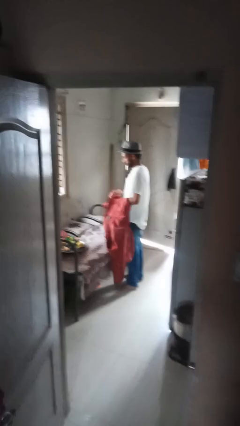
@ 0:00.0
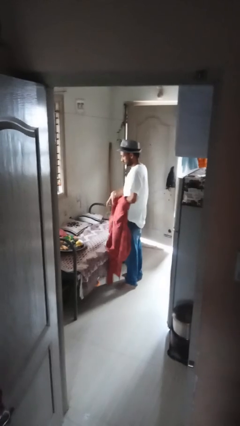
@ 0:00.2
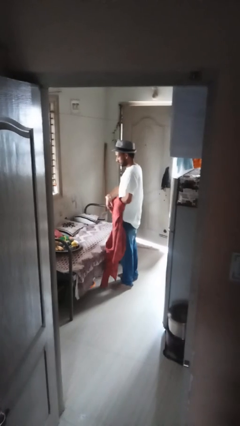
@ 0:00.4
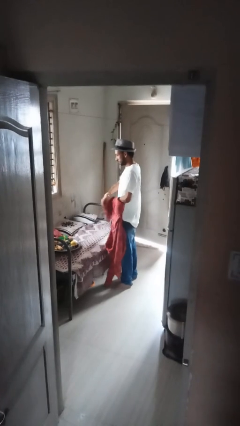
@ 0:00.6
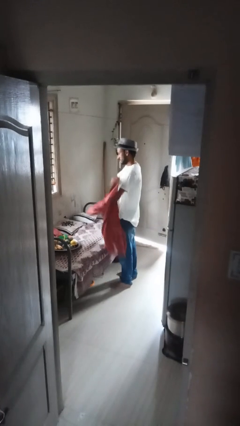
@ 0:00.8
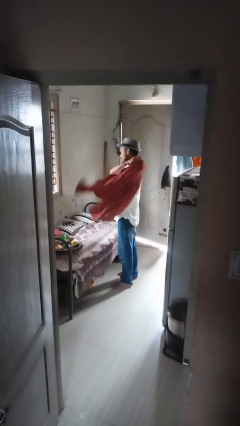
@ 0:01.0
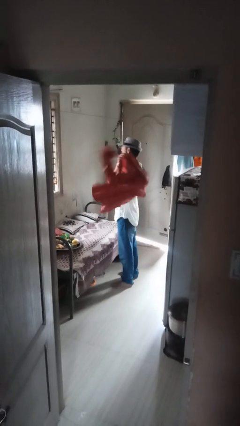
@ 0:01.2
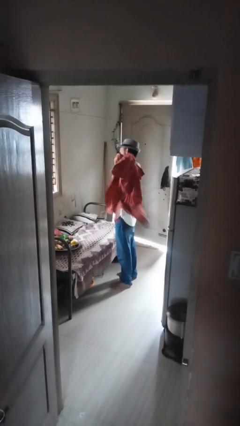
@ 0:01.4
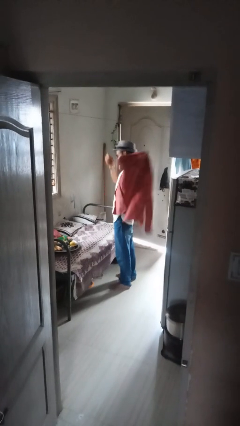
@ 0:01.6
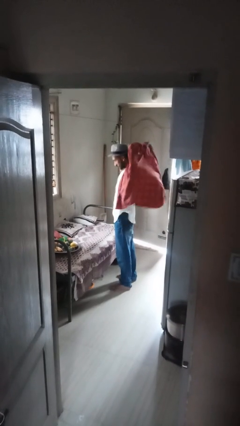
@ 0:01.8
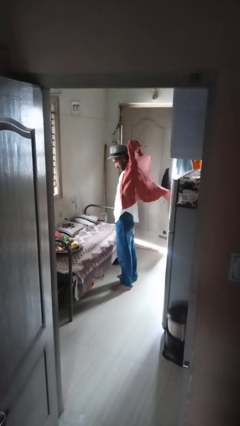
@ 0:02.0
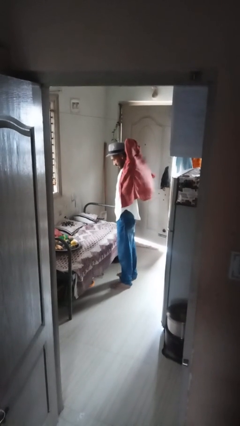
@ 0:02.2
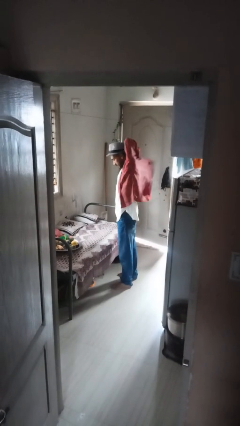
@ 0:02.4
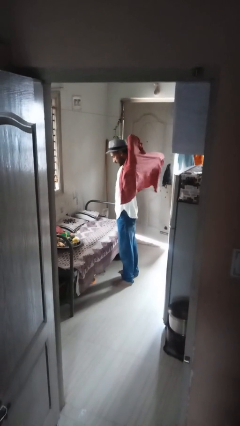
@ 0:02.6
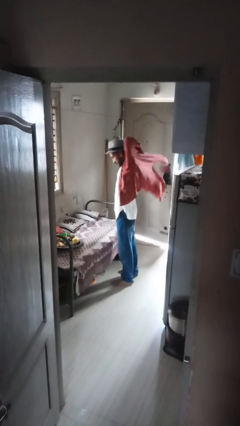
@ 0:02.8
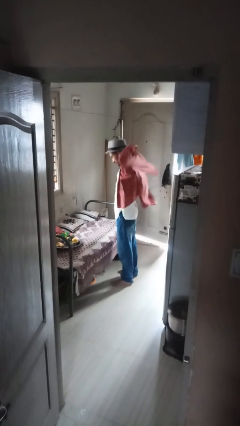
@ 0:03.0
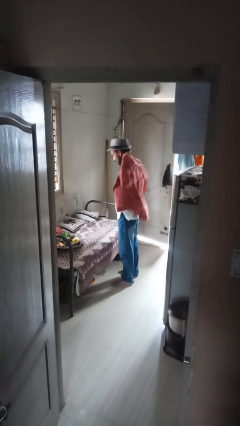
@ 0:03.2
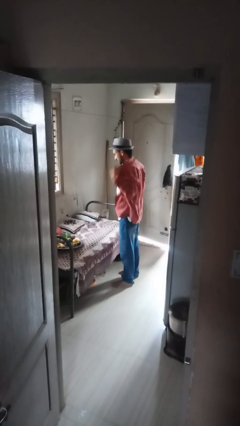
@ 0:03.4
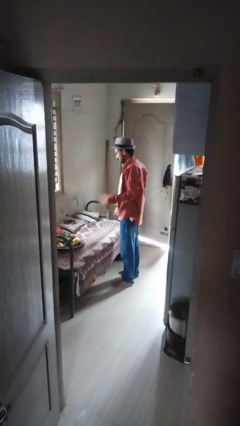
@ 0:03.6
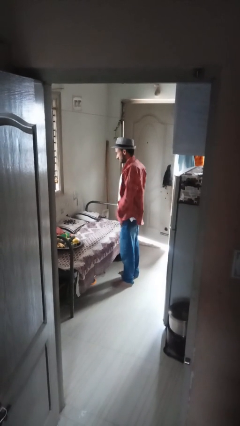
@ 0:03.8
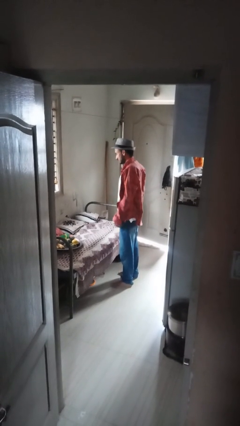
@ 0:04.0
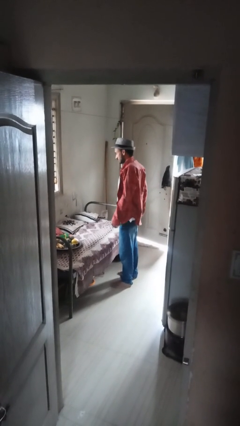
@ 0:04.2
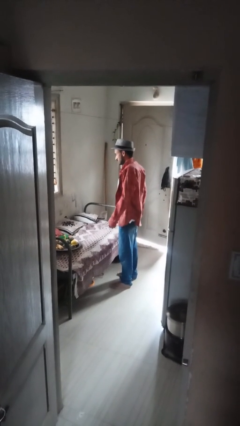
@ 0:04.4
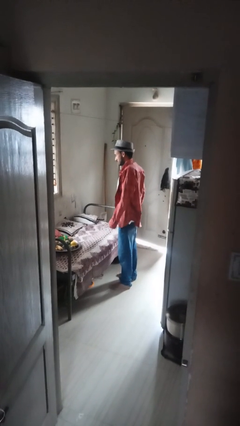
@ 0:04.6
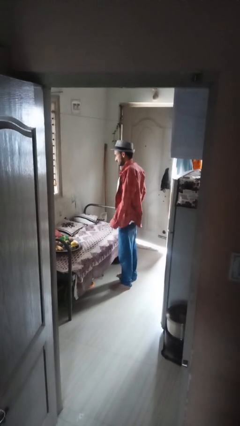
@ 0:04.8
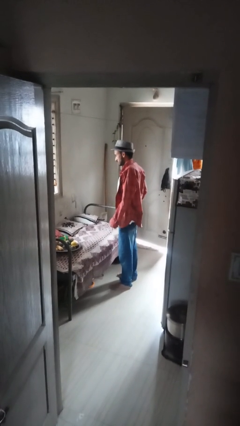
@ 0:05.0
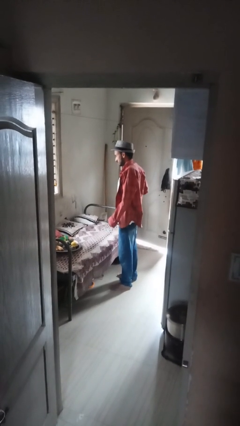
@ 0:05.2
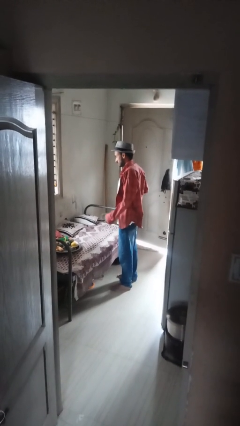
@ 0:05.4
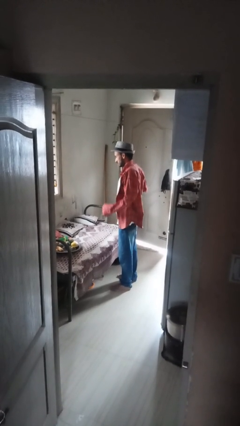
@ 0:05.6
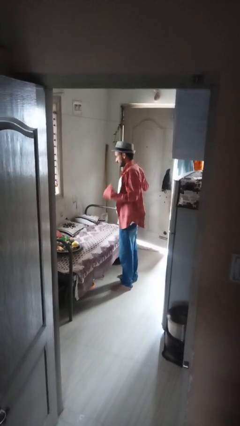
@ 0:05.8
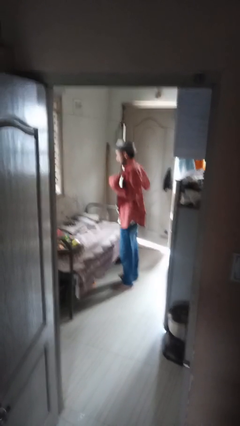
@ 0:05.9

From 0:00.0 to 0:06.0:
person puts on shirt

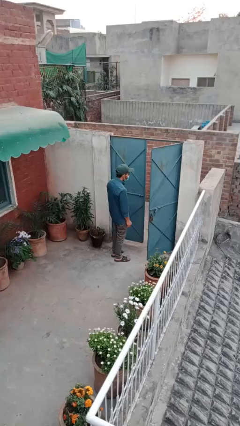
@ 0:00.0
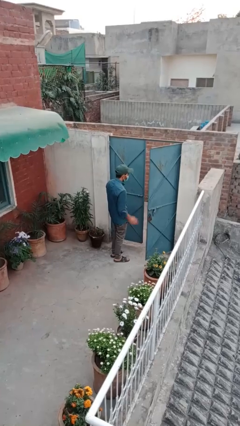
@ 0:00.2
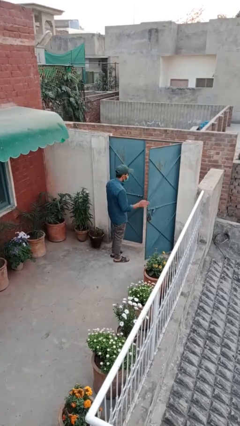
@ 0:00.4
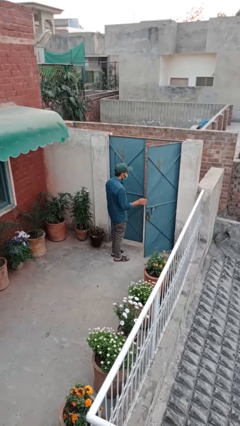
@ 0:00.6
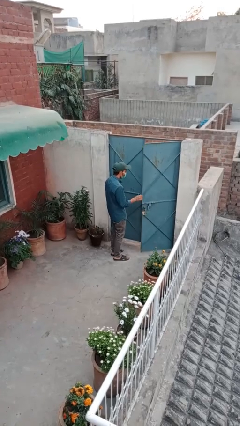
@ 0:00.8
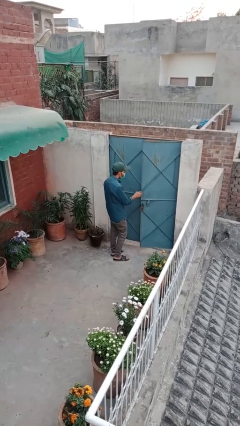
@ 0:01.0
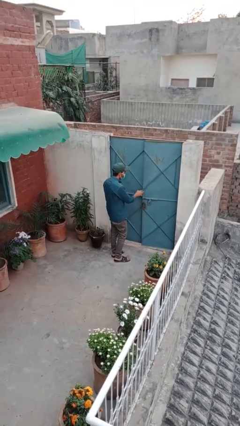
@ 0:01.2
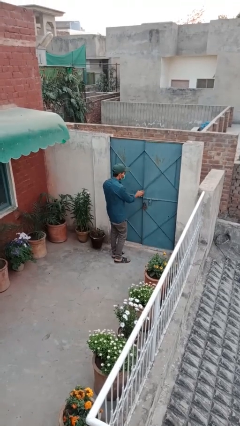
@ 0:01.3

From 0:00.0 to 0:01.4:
person closes facility door

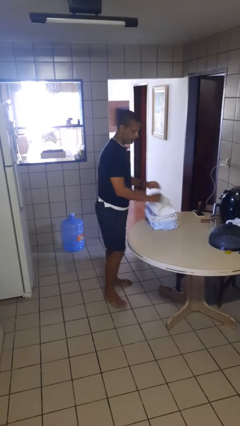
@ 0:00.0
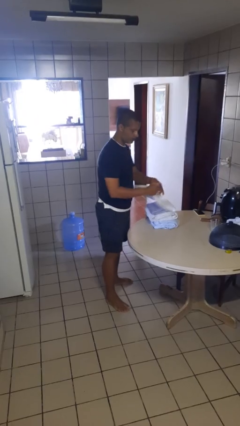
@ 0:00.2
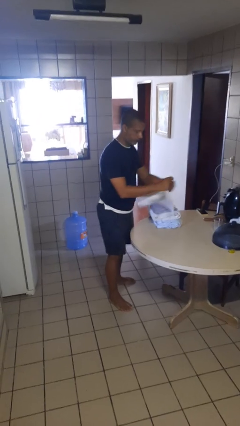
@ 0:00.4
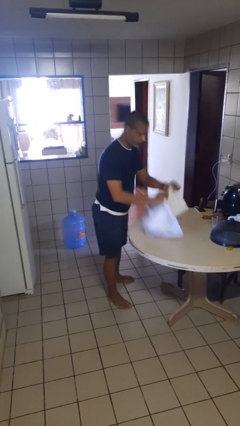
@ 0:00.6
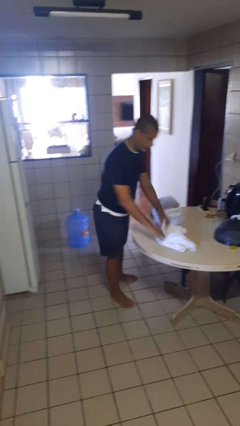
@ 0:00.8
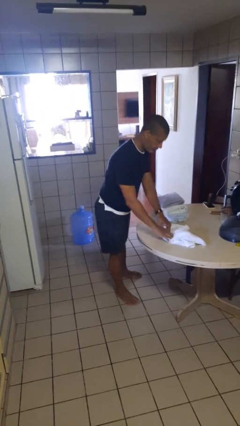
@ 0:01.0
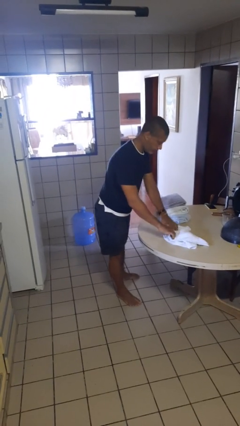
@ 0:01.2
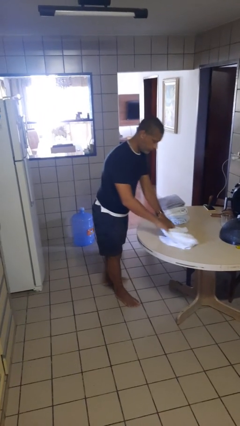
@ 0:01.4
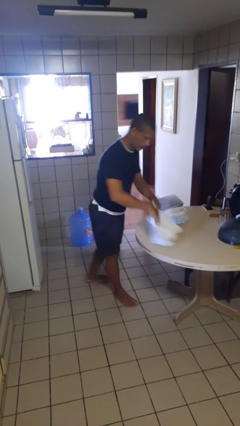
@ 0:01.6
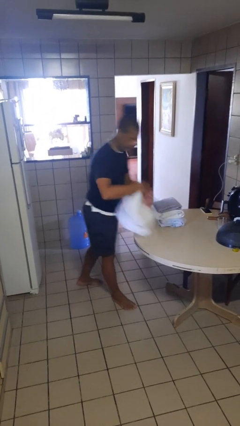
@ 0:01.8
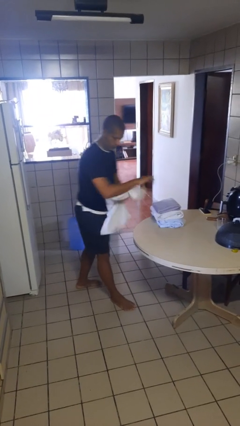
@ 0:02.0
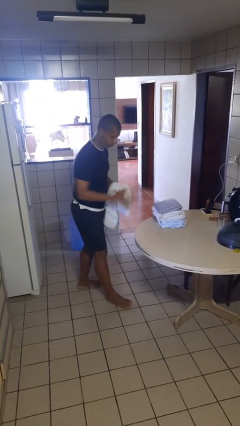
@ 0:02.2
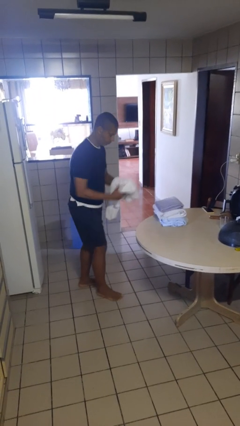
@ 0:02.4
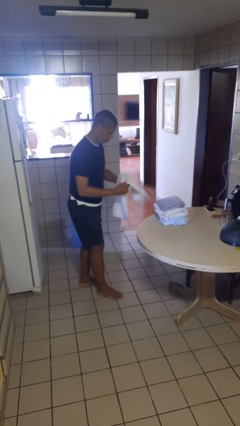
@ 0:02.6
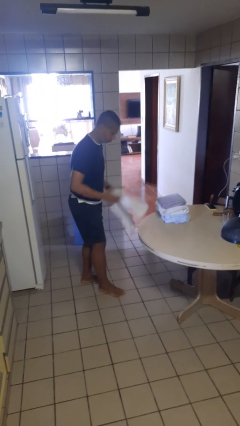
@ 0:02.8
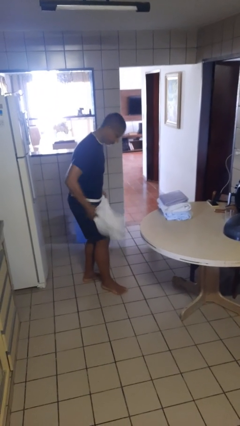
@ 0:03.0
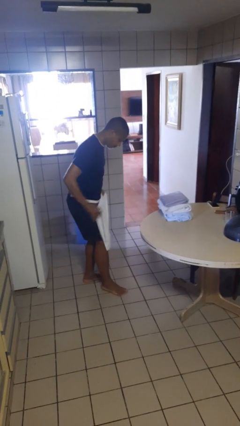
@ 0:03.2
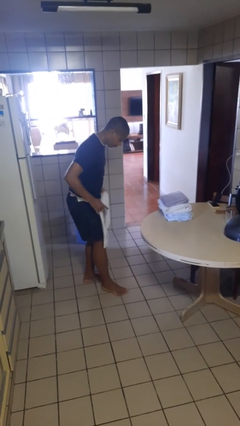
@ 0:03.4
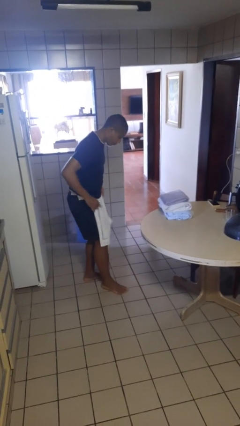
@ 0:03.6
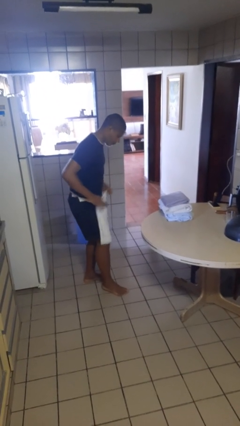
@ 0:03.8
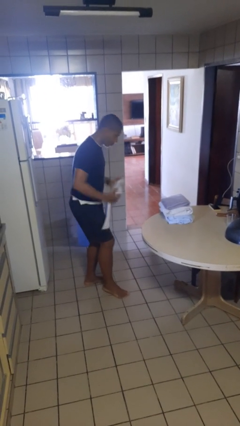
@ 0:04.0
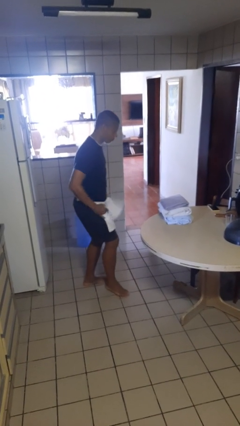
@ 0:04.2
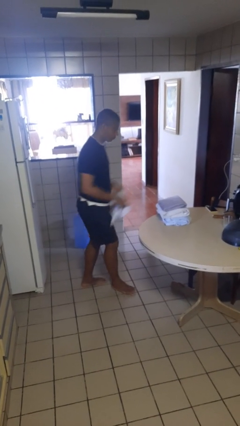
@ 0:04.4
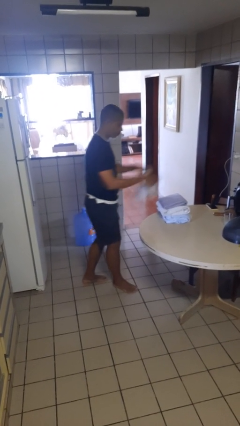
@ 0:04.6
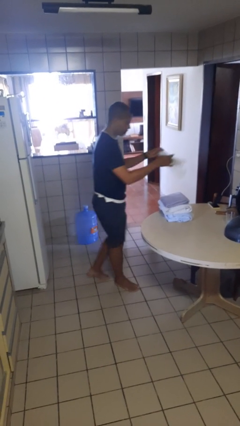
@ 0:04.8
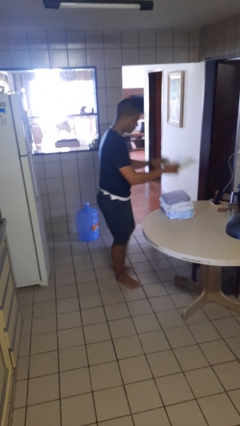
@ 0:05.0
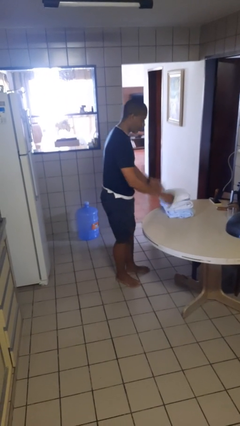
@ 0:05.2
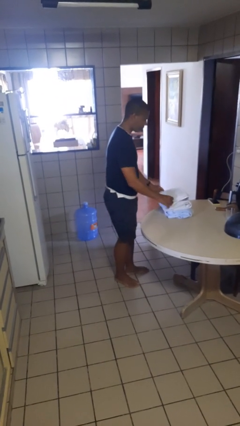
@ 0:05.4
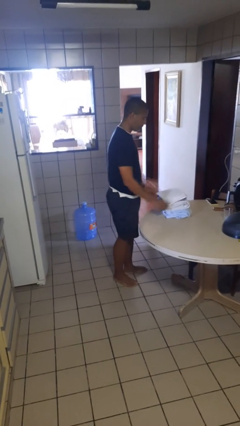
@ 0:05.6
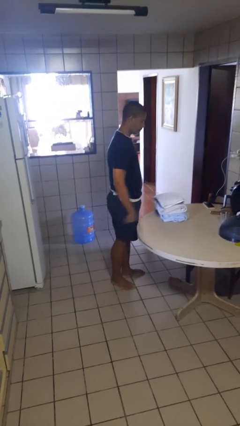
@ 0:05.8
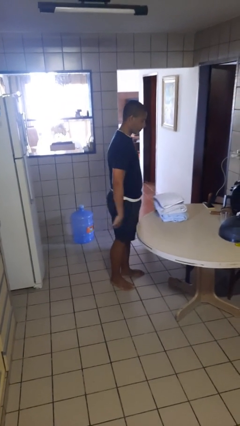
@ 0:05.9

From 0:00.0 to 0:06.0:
person folds towel

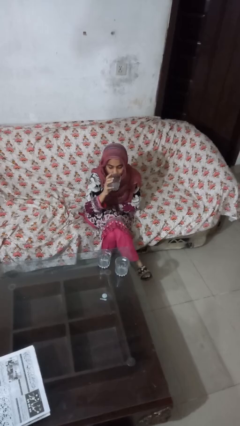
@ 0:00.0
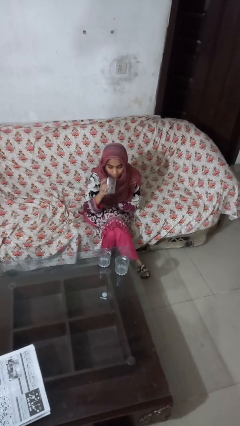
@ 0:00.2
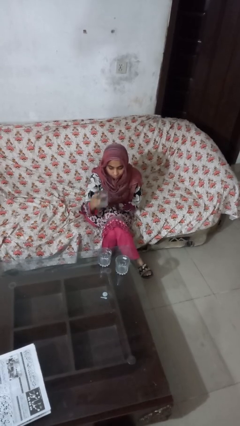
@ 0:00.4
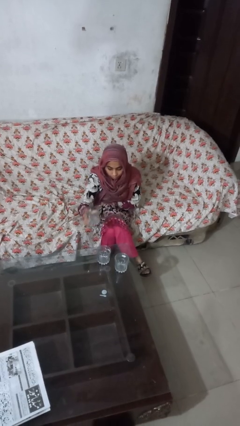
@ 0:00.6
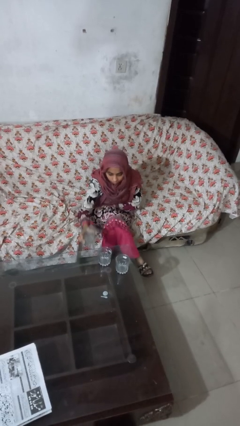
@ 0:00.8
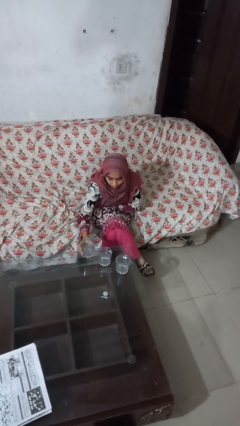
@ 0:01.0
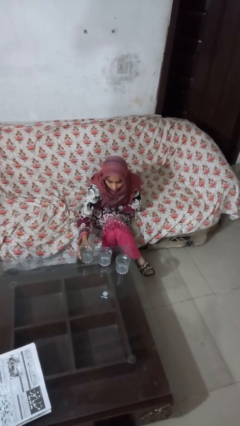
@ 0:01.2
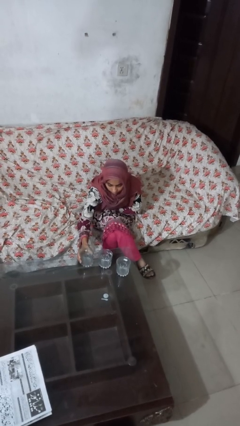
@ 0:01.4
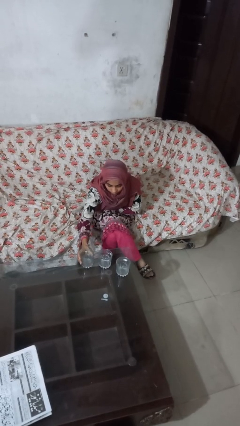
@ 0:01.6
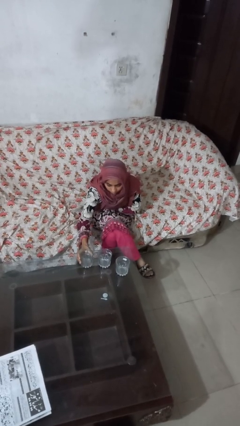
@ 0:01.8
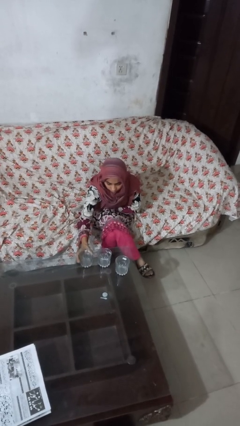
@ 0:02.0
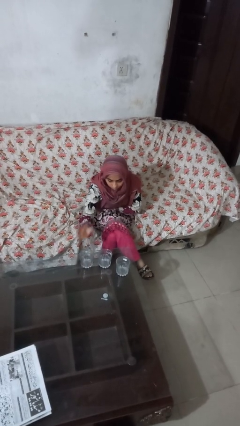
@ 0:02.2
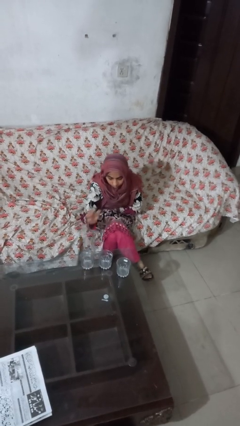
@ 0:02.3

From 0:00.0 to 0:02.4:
person puts down object on table

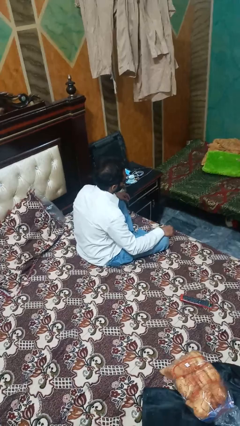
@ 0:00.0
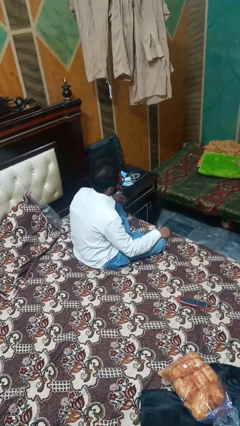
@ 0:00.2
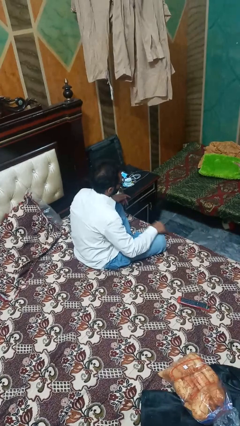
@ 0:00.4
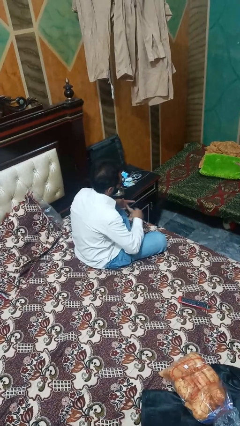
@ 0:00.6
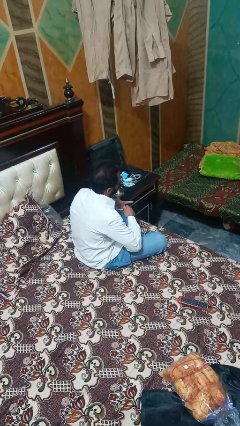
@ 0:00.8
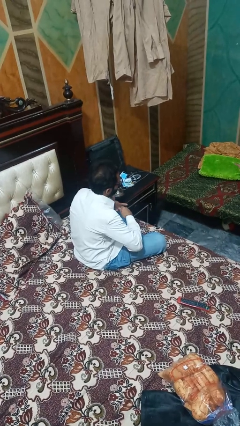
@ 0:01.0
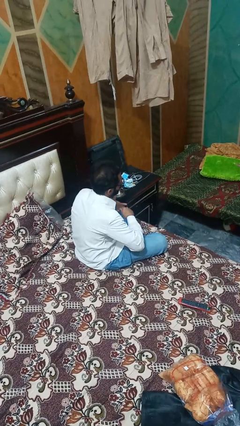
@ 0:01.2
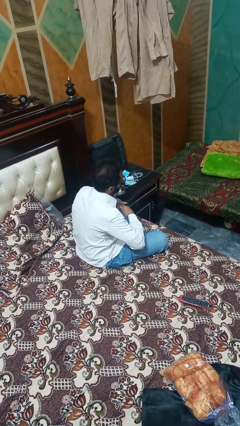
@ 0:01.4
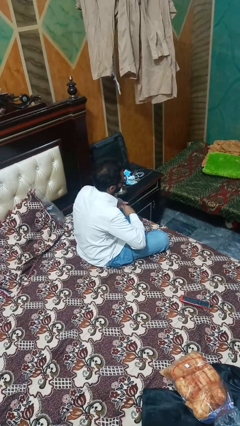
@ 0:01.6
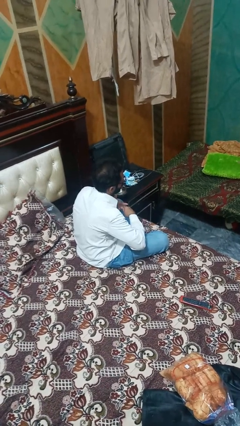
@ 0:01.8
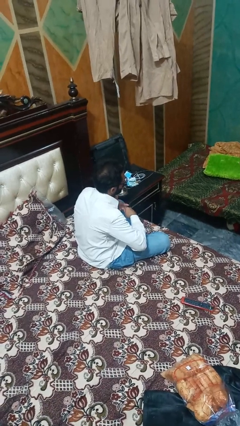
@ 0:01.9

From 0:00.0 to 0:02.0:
person snaps fingers
